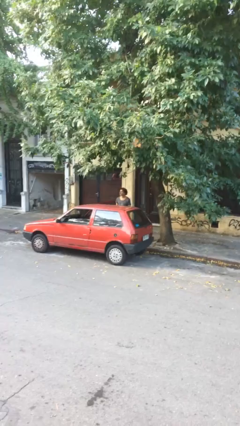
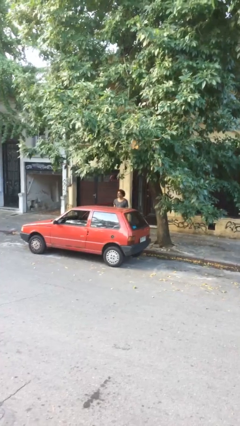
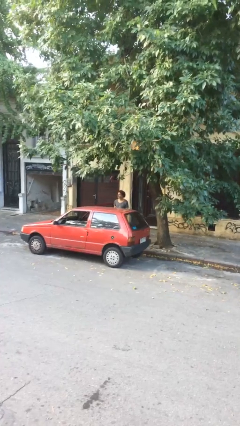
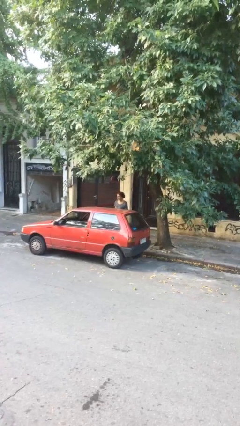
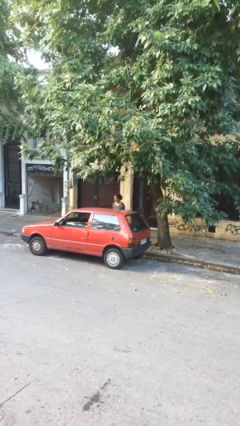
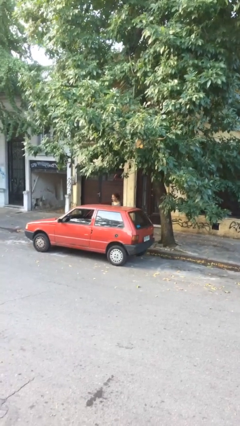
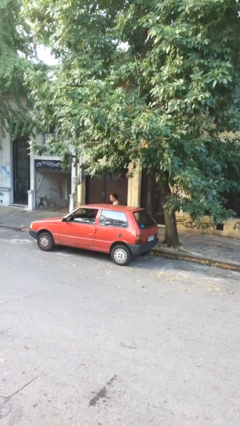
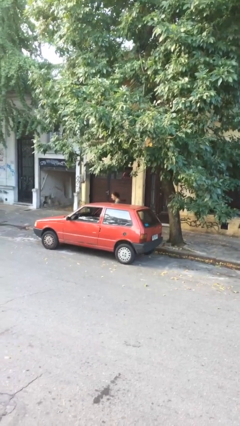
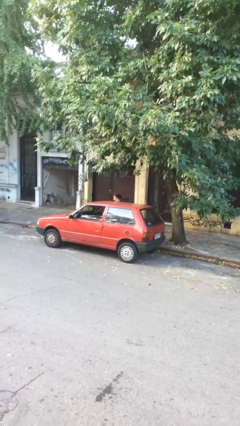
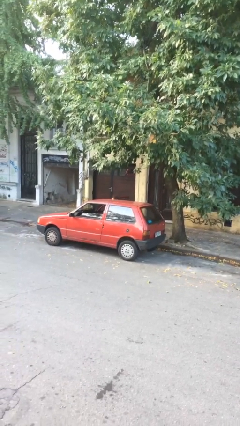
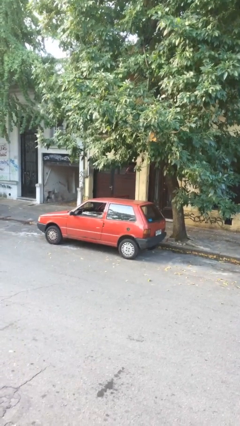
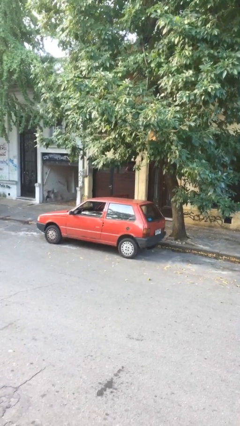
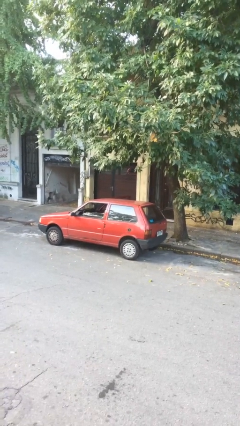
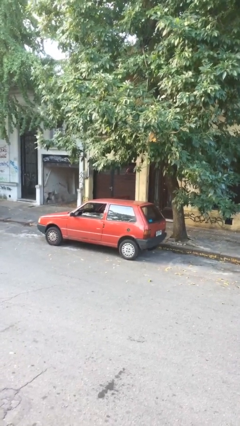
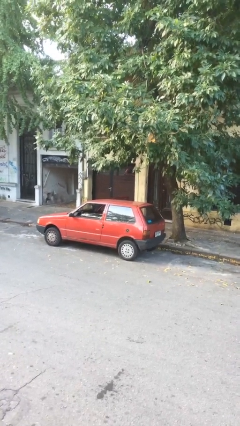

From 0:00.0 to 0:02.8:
person enters car

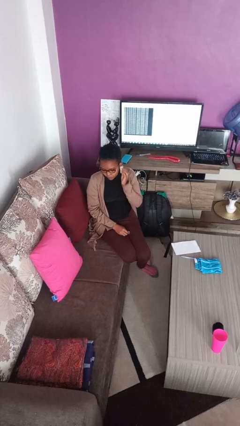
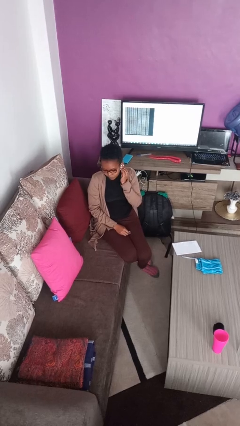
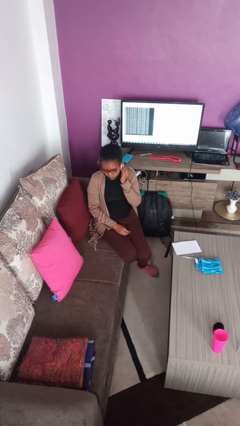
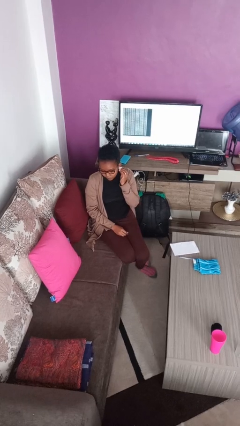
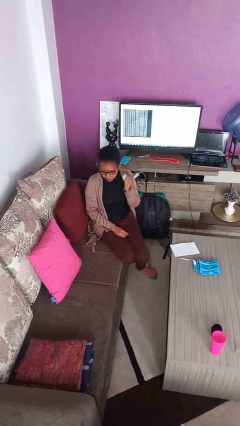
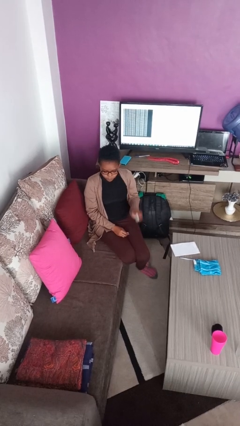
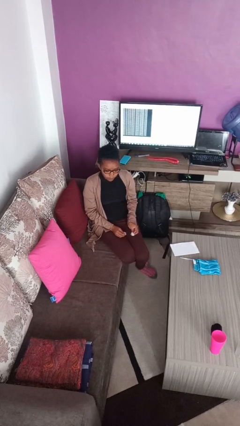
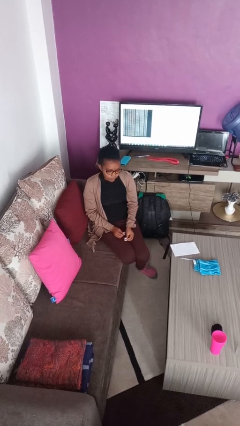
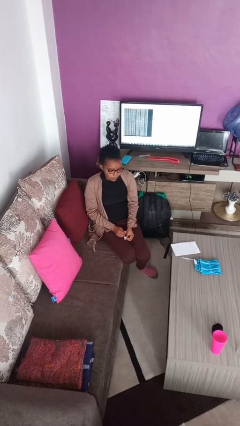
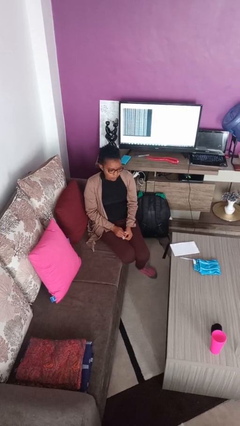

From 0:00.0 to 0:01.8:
person takes off earrings

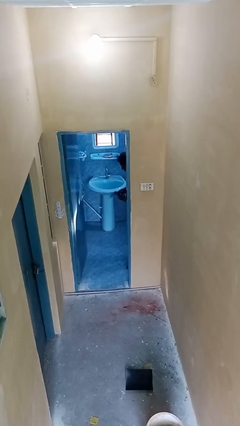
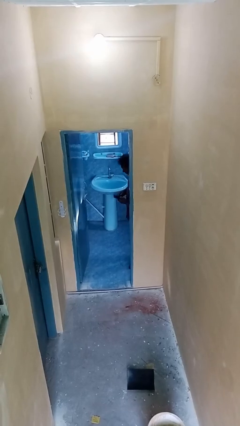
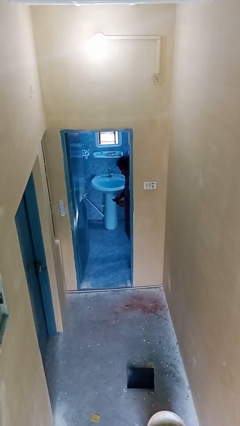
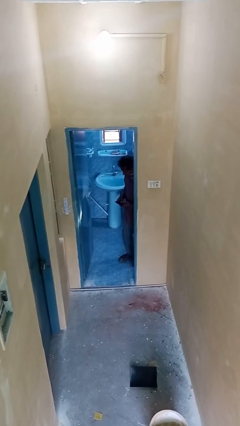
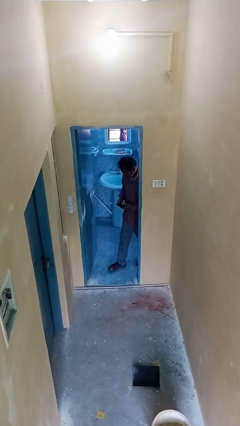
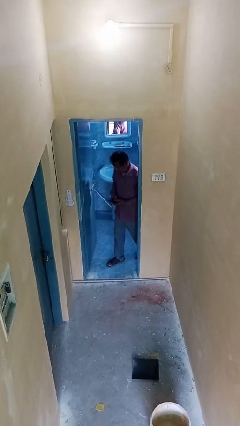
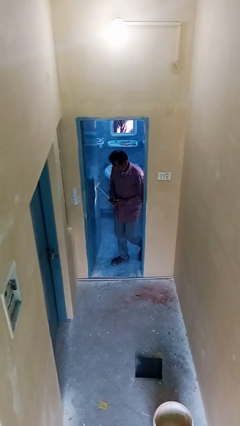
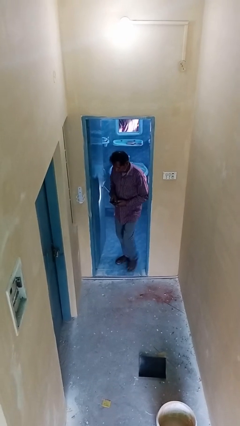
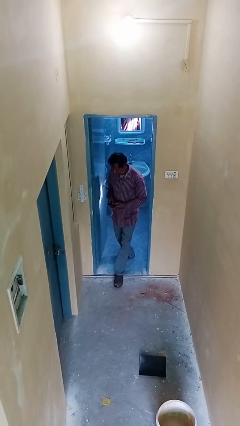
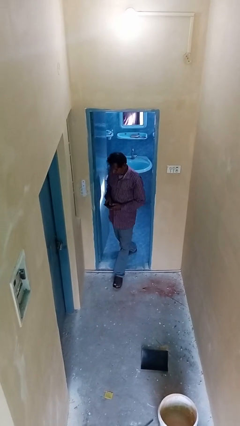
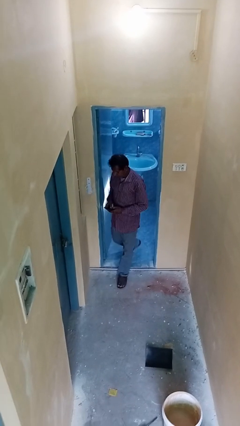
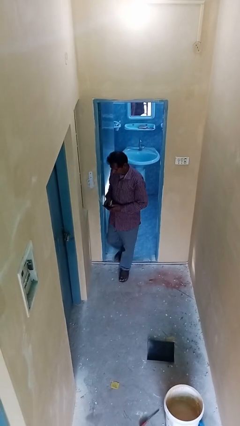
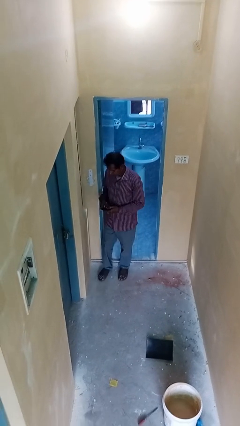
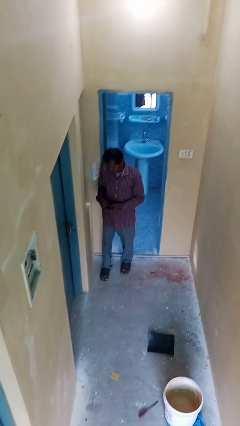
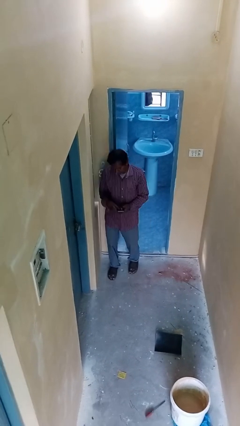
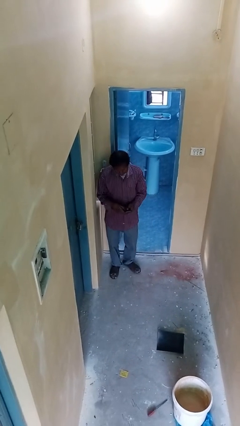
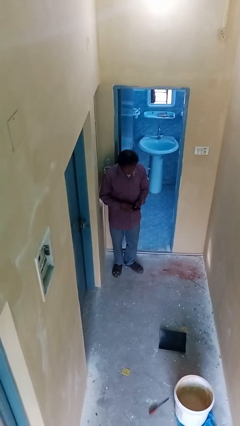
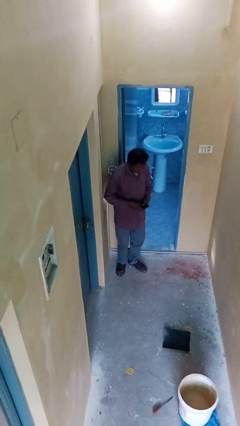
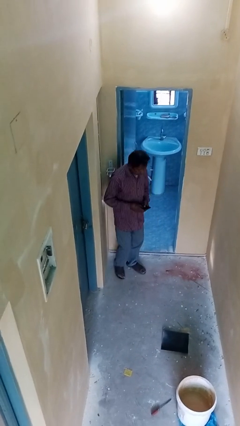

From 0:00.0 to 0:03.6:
person enters scene through structure

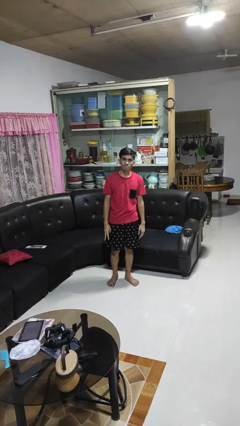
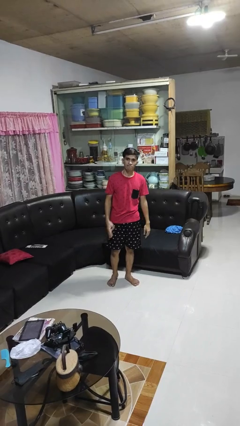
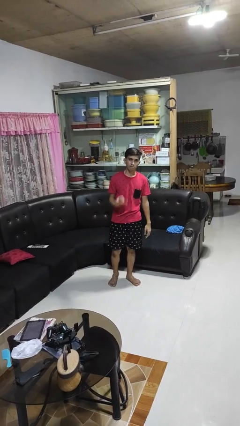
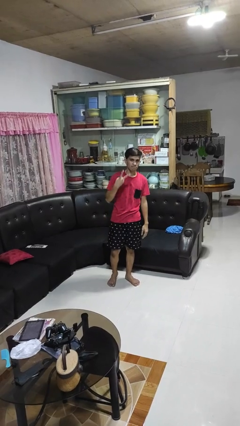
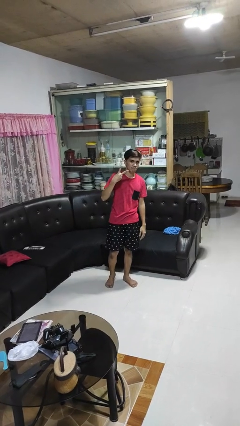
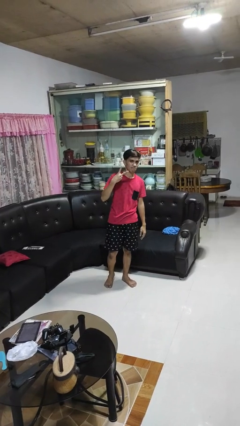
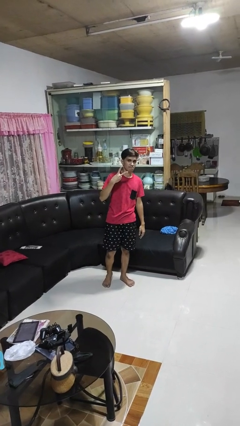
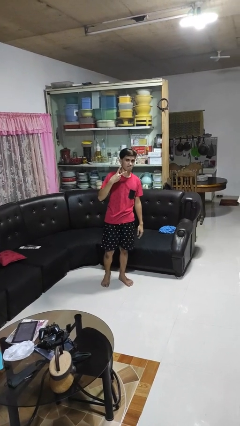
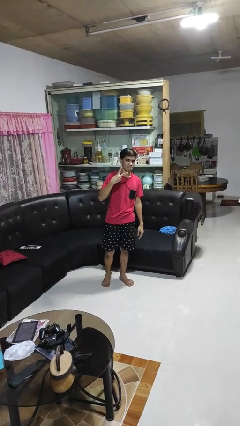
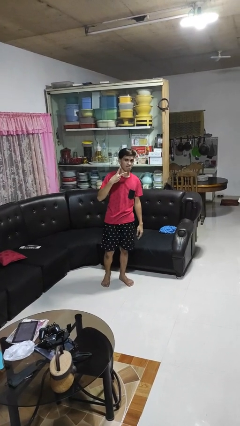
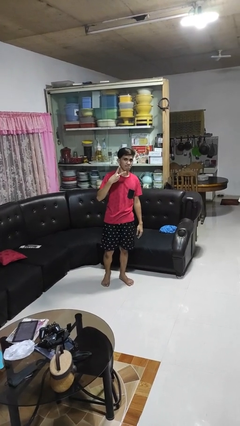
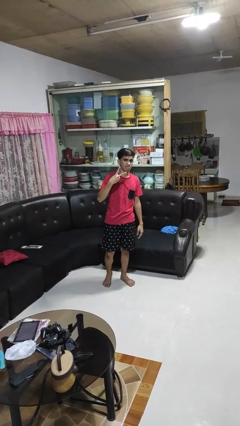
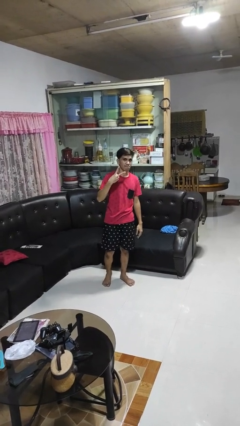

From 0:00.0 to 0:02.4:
person gestures peace

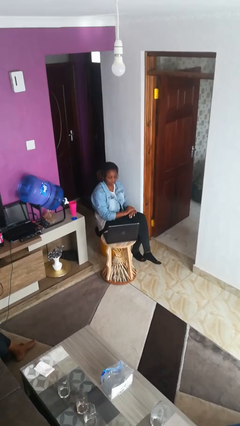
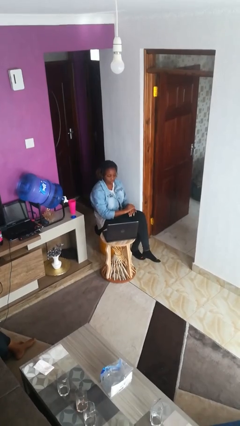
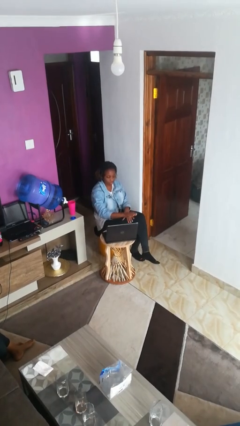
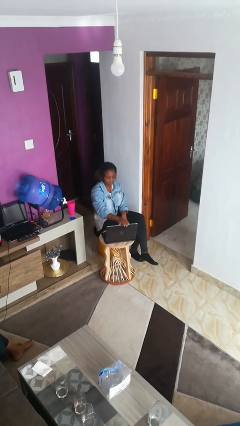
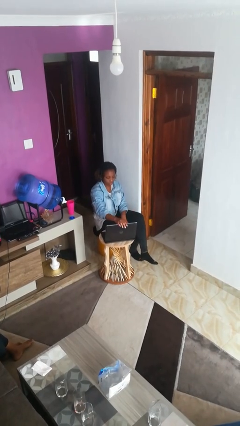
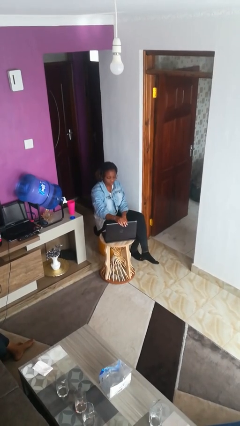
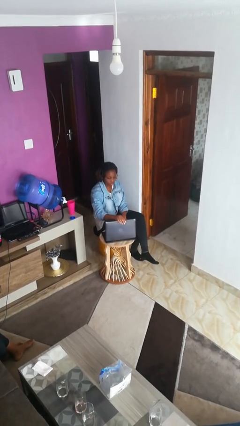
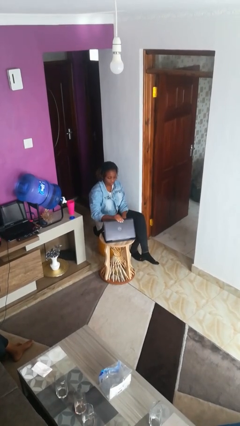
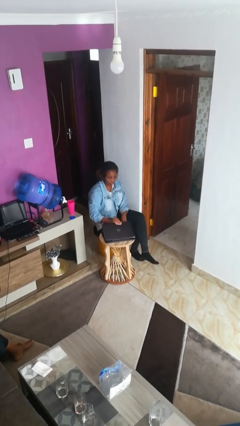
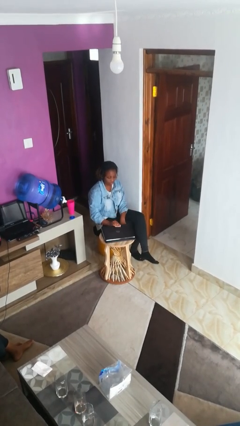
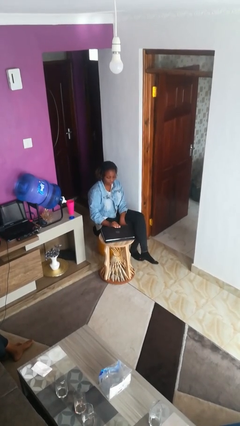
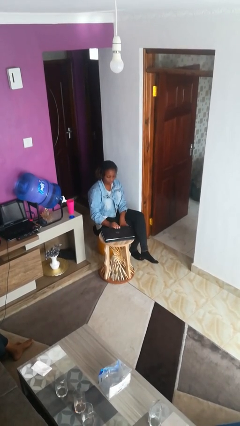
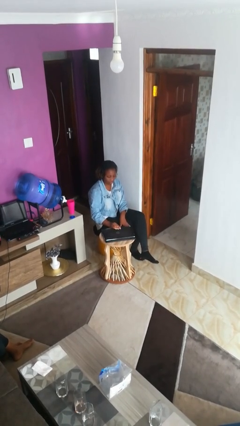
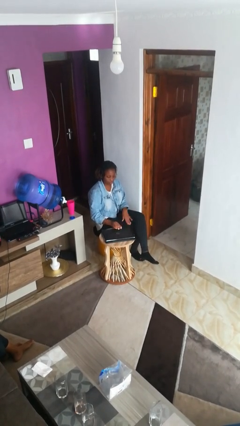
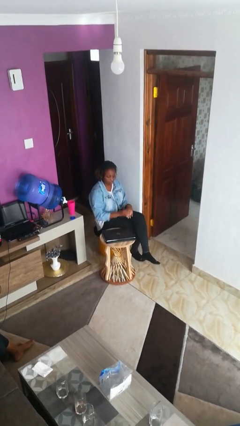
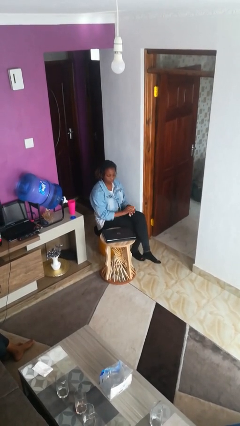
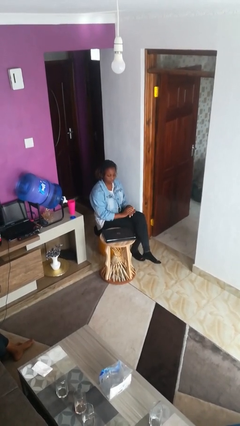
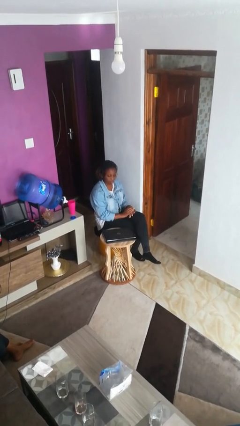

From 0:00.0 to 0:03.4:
person closes laptop

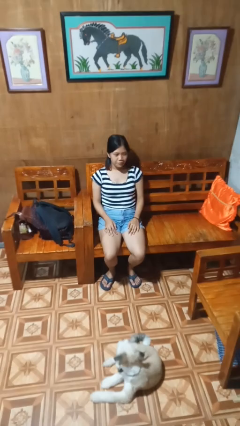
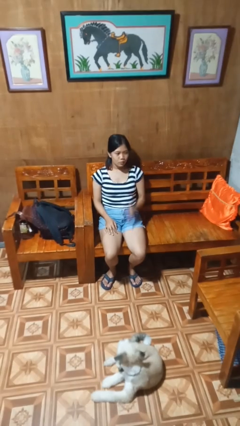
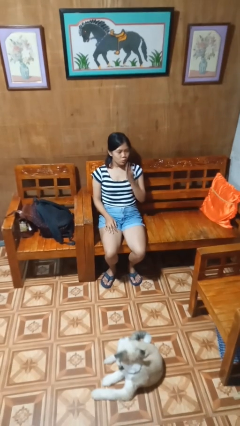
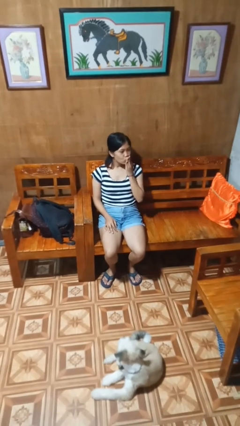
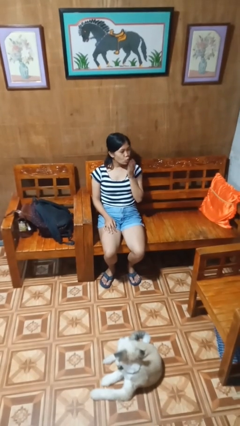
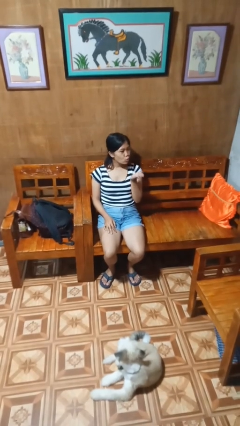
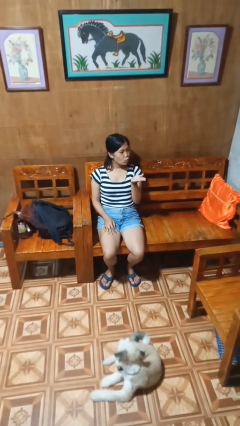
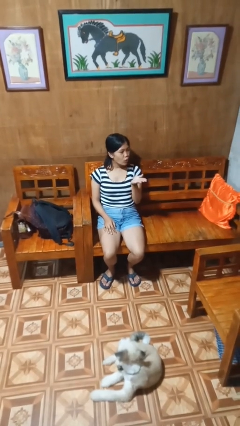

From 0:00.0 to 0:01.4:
person gestures blow kiss

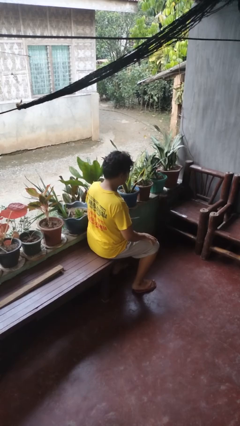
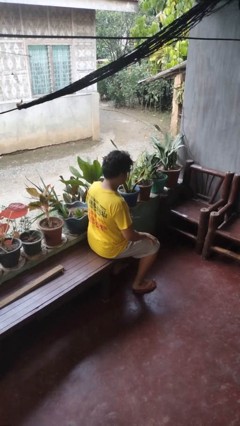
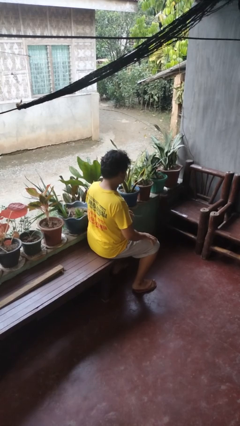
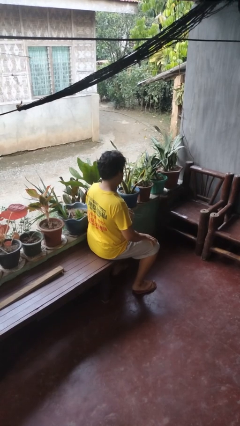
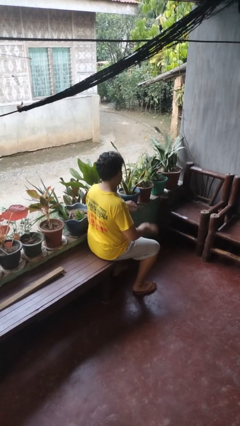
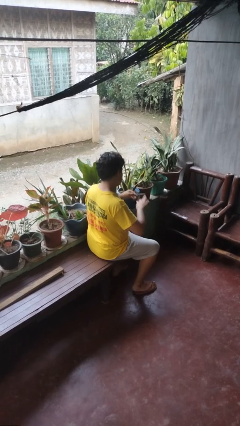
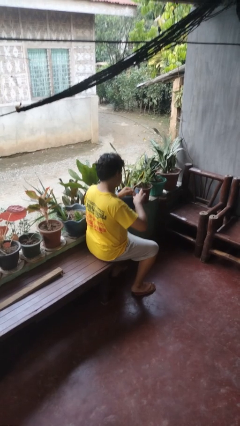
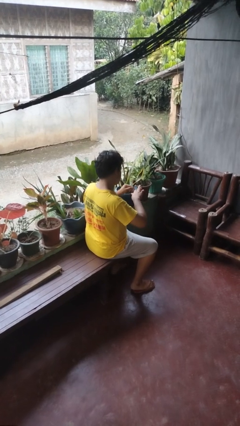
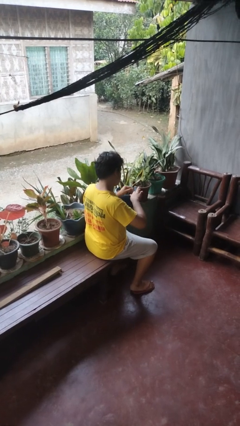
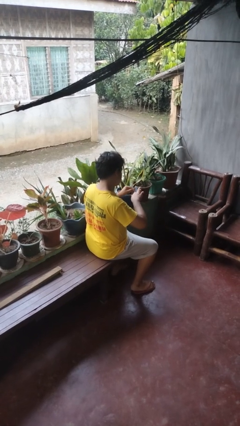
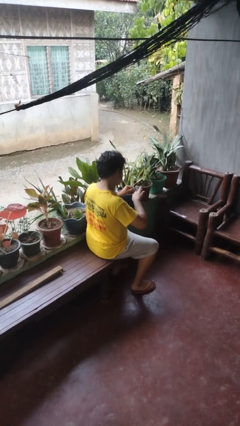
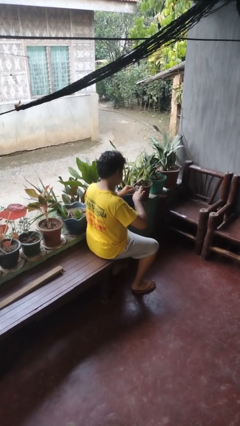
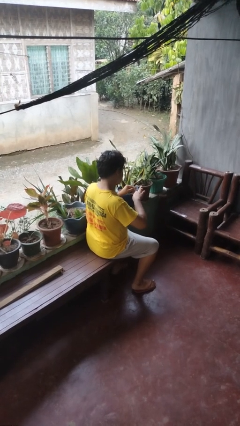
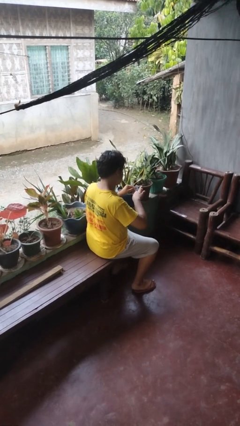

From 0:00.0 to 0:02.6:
person files fingernails
